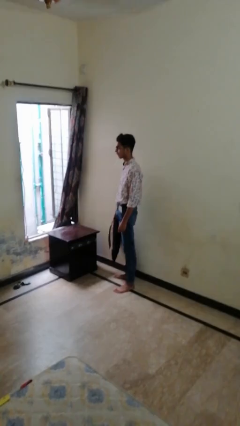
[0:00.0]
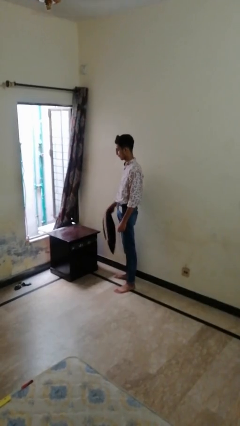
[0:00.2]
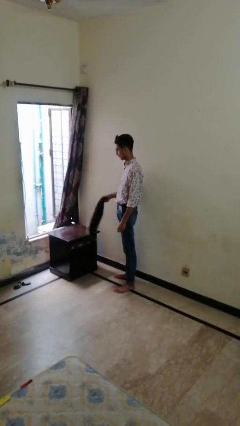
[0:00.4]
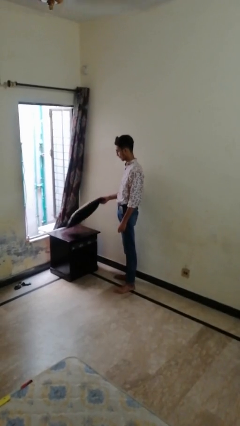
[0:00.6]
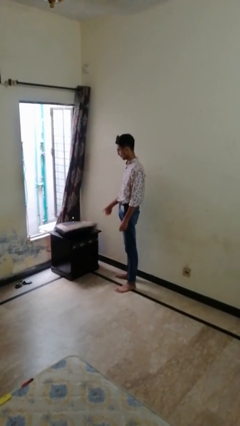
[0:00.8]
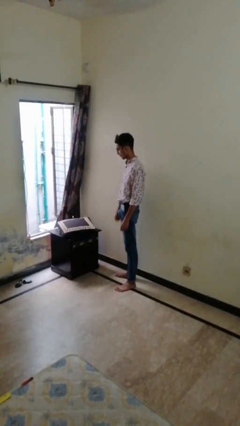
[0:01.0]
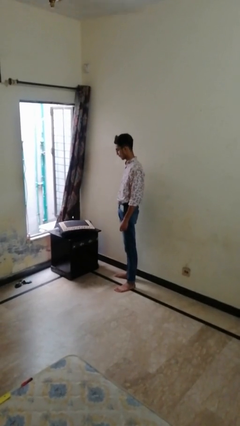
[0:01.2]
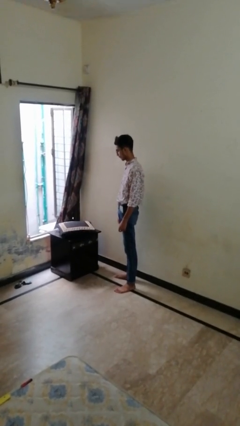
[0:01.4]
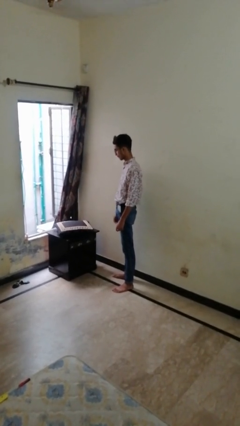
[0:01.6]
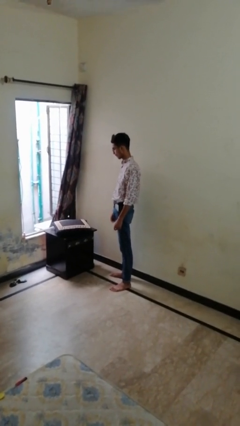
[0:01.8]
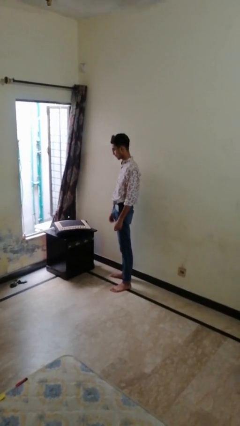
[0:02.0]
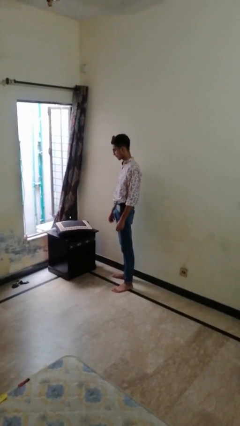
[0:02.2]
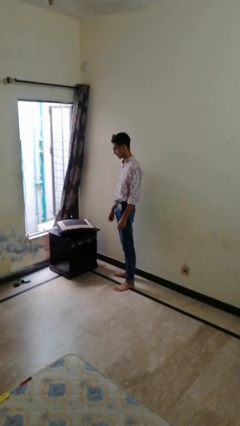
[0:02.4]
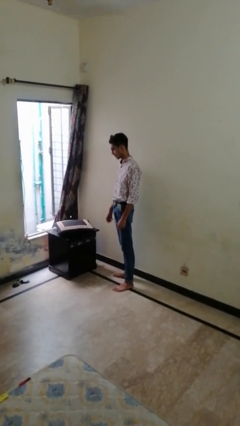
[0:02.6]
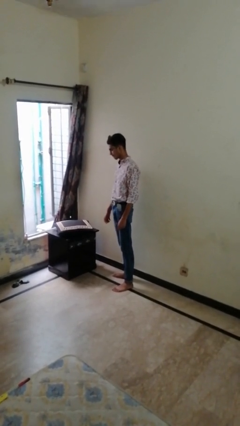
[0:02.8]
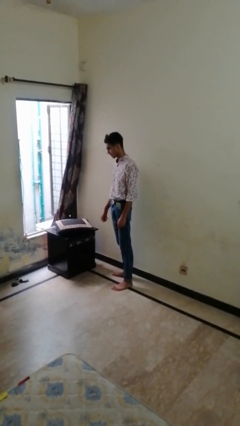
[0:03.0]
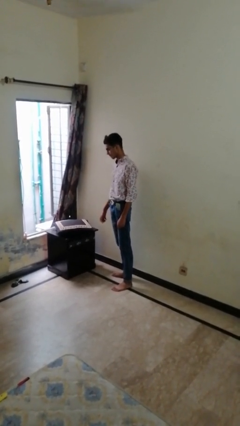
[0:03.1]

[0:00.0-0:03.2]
person throws object on table

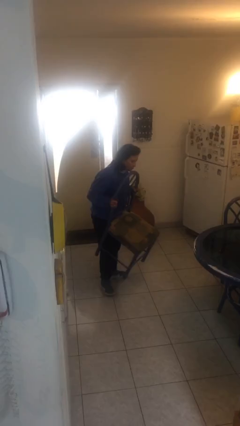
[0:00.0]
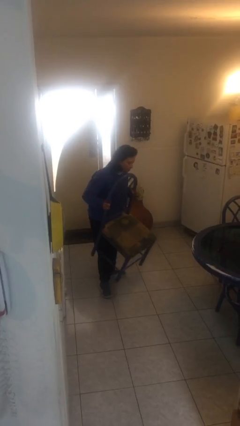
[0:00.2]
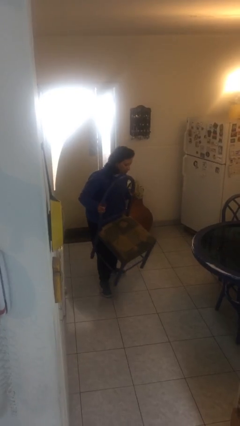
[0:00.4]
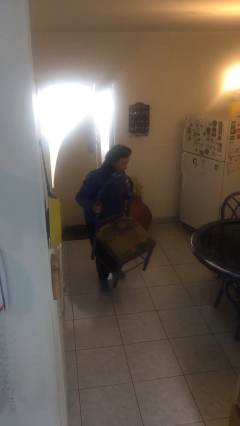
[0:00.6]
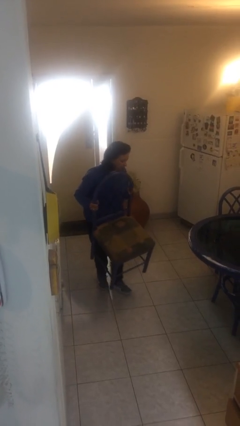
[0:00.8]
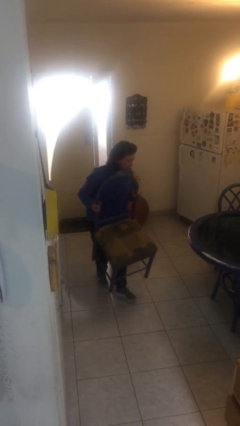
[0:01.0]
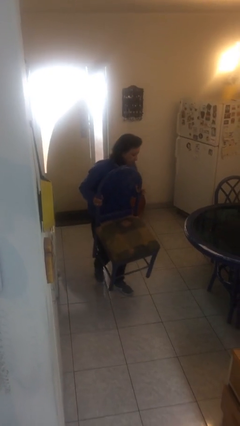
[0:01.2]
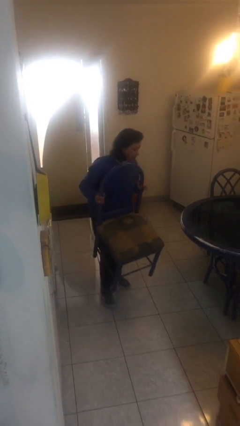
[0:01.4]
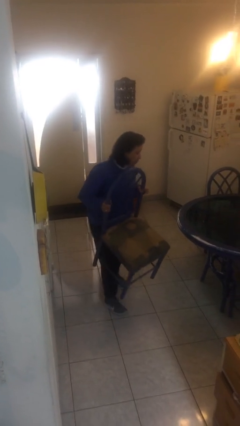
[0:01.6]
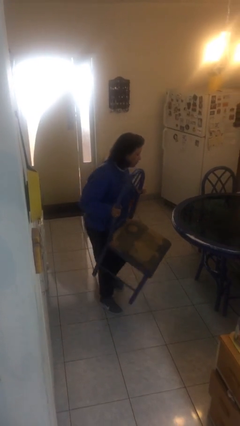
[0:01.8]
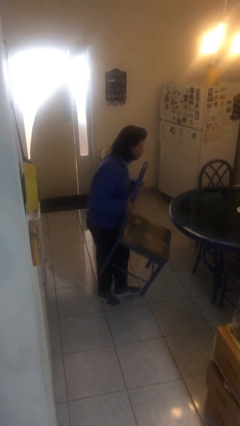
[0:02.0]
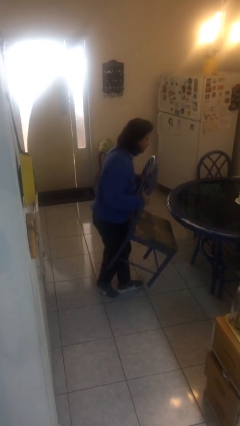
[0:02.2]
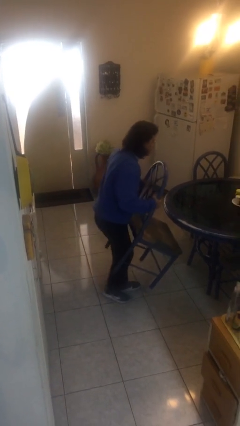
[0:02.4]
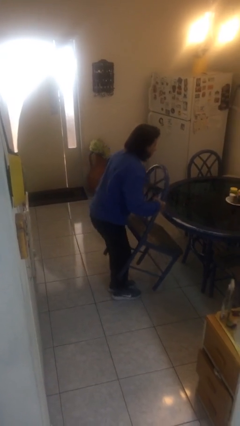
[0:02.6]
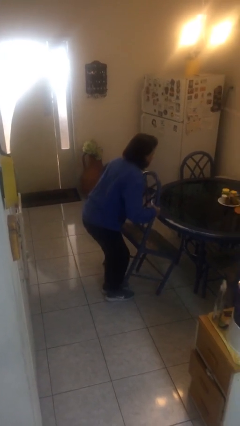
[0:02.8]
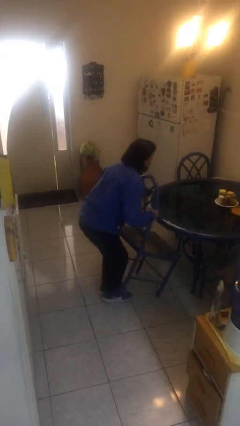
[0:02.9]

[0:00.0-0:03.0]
person carries heavy object

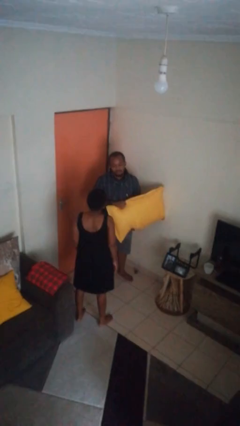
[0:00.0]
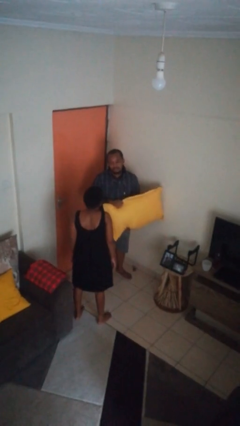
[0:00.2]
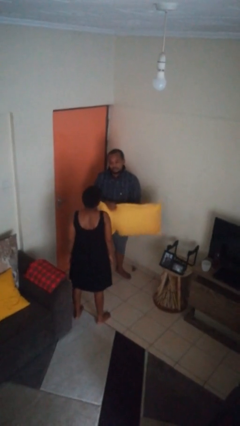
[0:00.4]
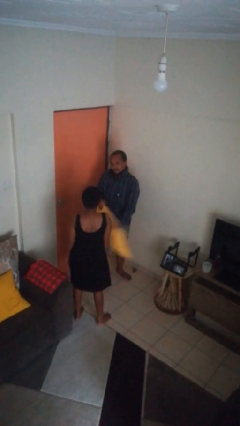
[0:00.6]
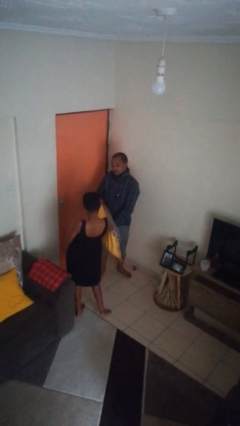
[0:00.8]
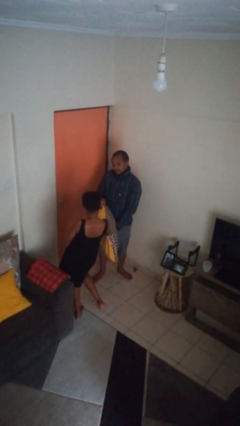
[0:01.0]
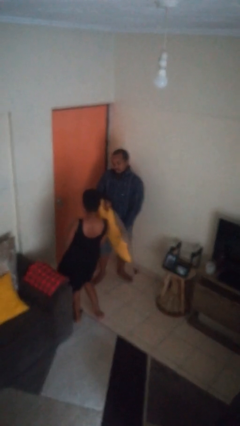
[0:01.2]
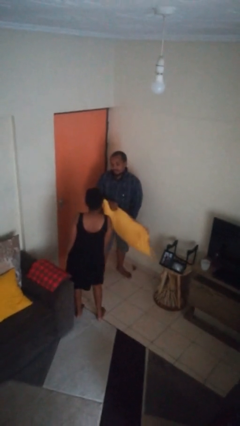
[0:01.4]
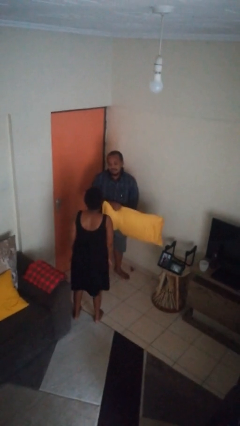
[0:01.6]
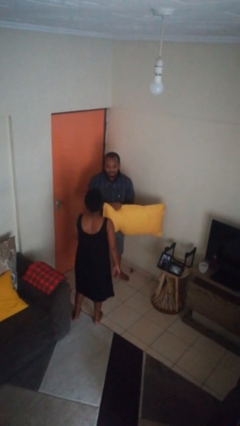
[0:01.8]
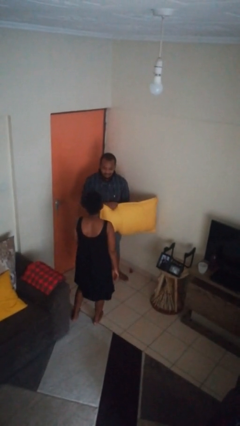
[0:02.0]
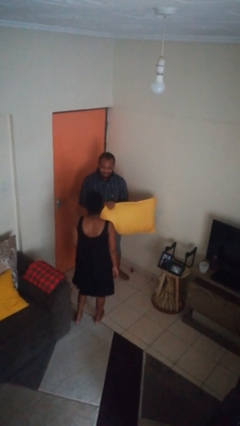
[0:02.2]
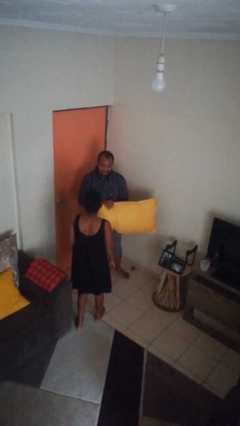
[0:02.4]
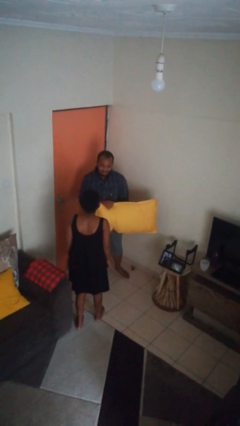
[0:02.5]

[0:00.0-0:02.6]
person hits person with pillow

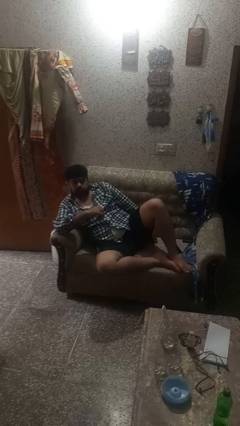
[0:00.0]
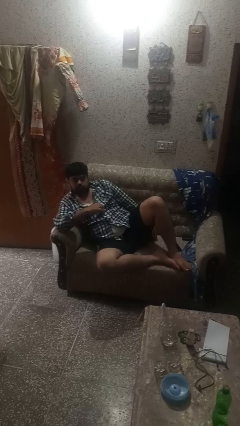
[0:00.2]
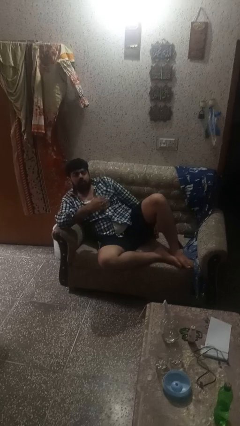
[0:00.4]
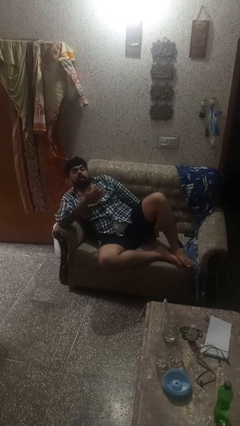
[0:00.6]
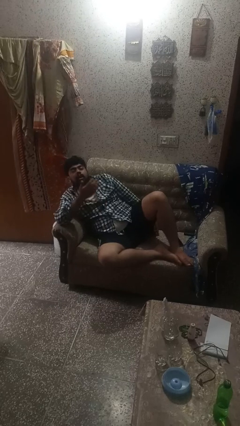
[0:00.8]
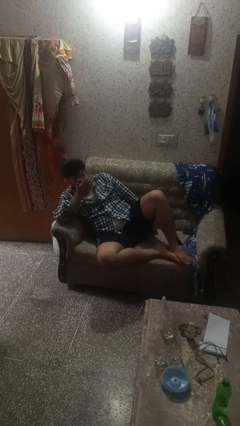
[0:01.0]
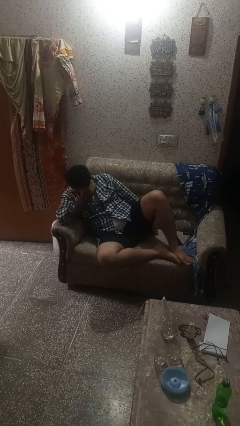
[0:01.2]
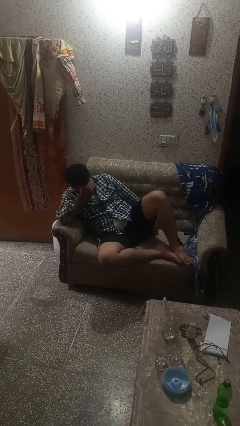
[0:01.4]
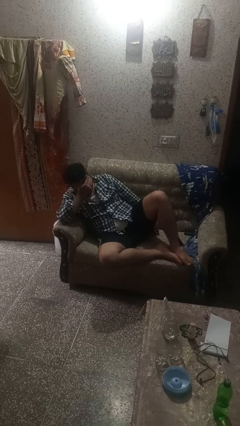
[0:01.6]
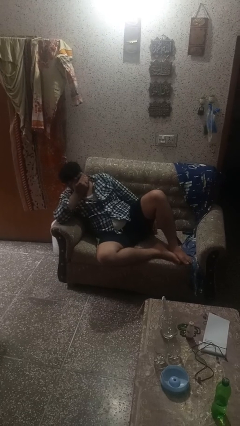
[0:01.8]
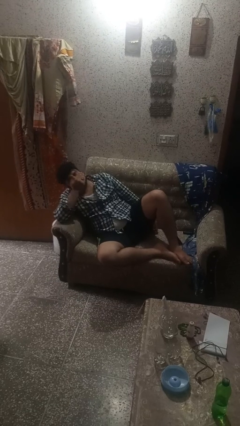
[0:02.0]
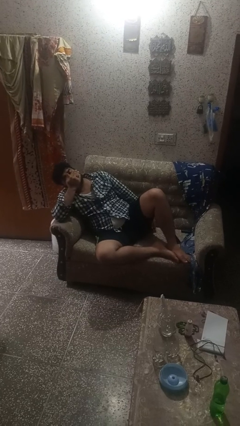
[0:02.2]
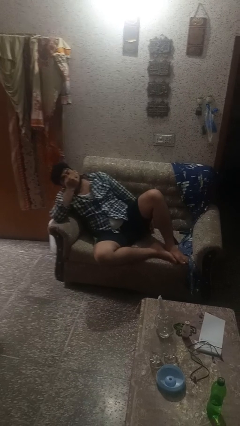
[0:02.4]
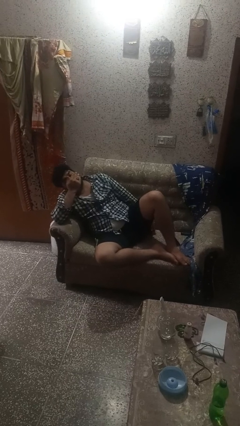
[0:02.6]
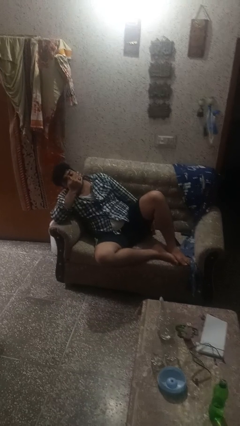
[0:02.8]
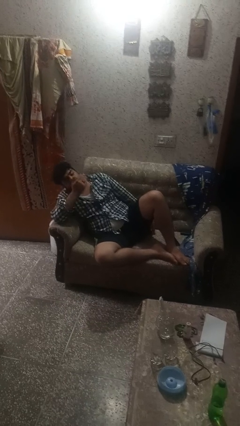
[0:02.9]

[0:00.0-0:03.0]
person sneezes into hand

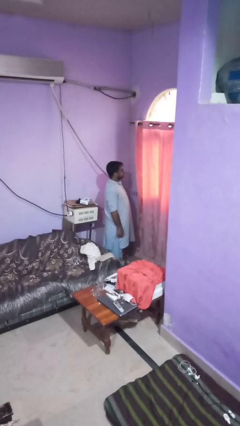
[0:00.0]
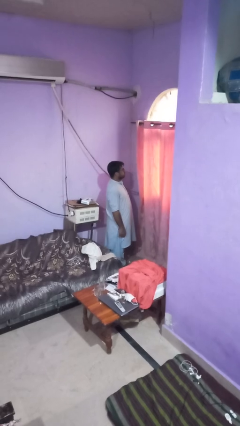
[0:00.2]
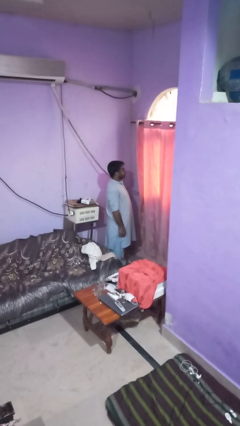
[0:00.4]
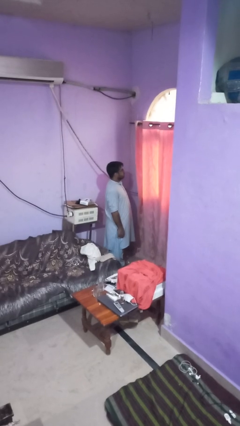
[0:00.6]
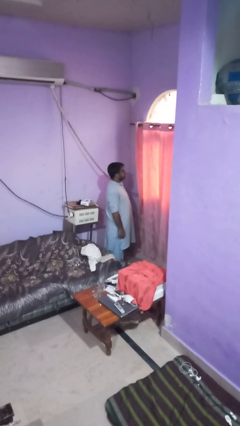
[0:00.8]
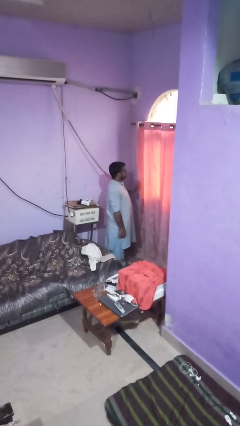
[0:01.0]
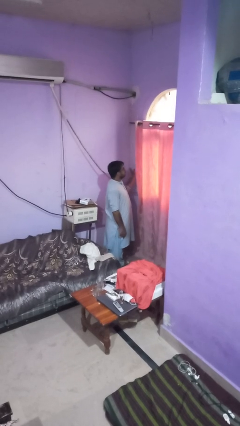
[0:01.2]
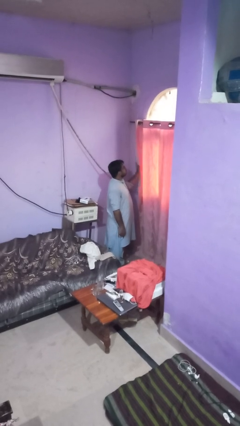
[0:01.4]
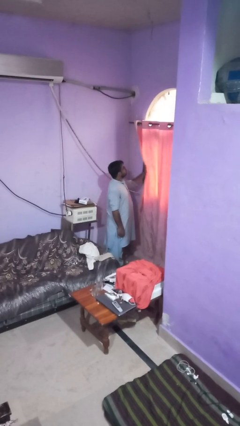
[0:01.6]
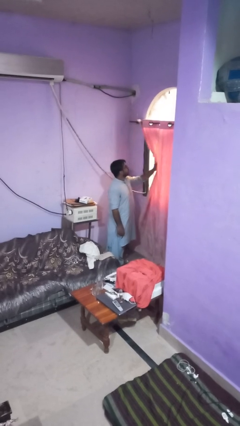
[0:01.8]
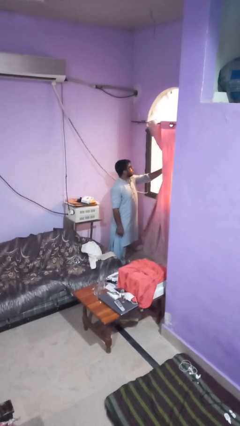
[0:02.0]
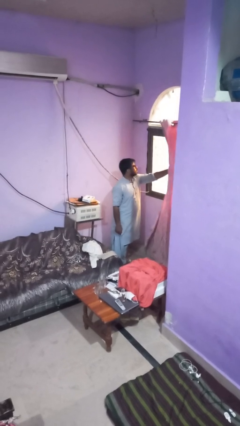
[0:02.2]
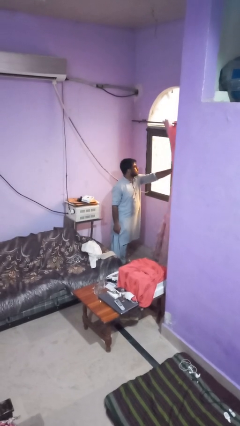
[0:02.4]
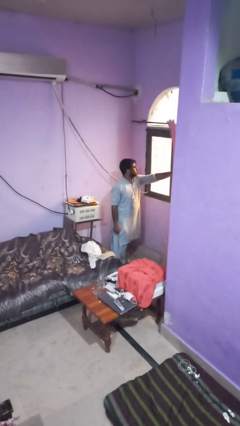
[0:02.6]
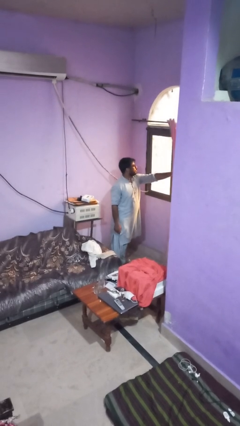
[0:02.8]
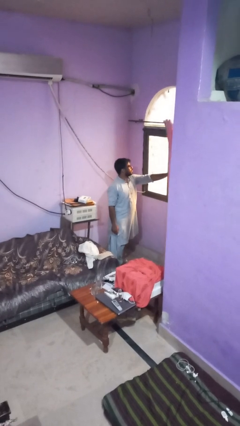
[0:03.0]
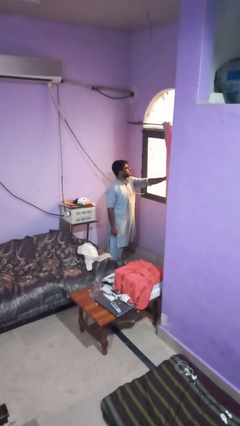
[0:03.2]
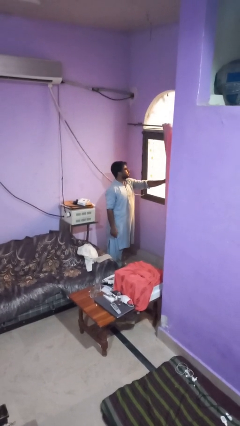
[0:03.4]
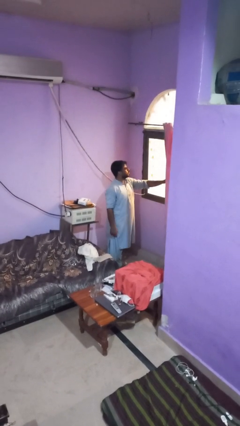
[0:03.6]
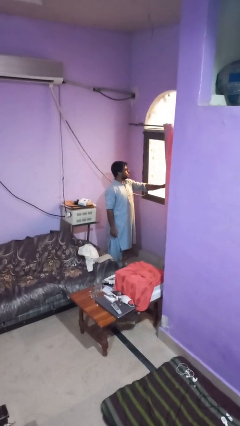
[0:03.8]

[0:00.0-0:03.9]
person opens curtains

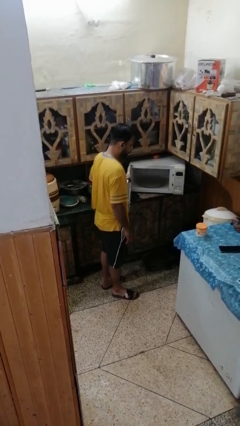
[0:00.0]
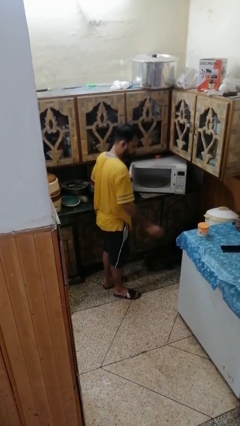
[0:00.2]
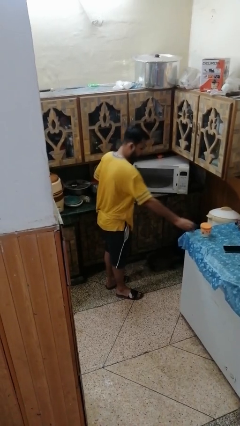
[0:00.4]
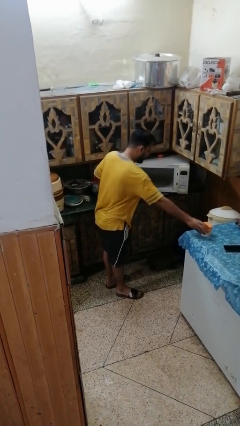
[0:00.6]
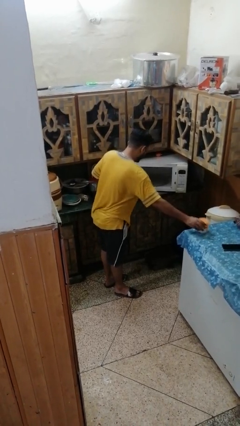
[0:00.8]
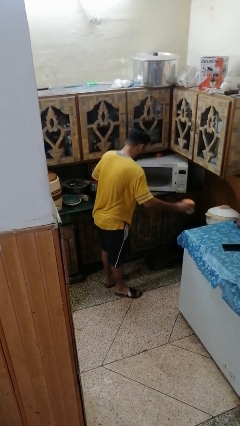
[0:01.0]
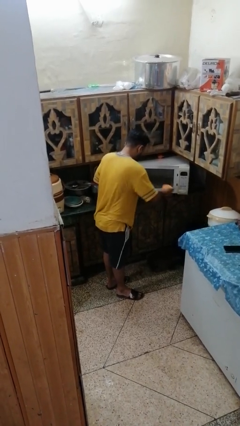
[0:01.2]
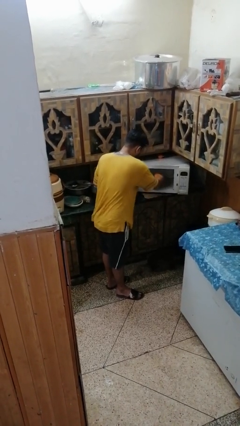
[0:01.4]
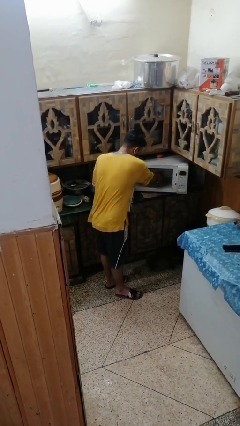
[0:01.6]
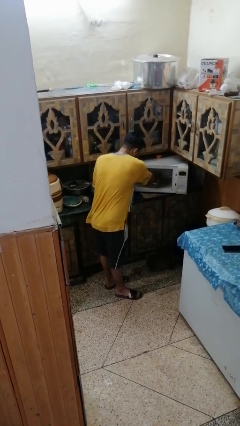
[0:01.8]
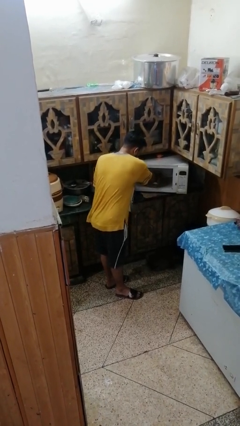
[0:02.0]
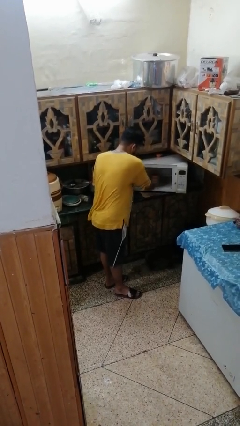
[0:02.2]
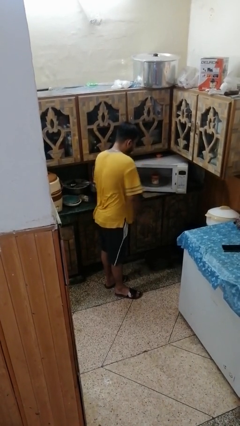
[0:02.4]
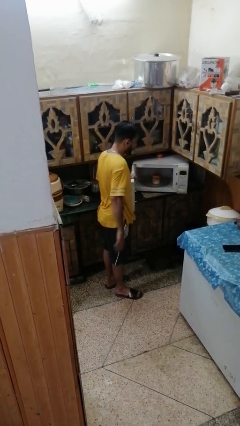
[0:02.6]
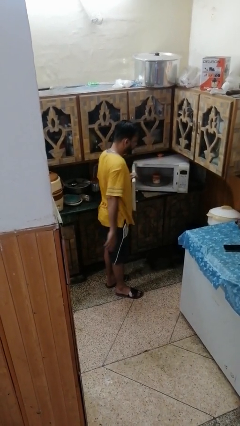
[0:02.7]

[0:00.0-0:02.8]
person puts object into refrigerator
